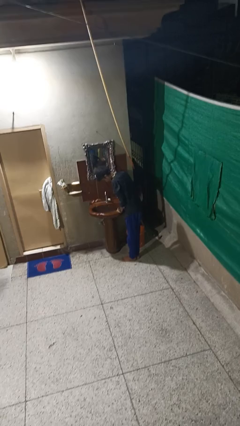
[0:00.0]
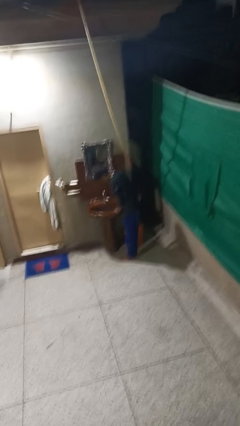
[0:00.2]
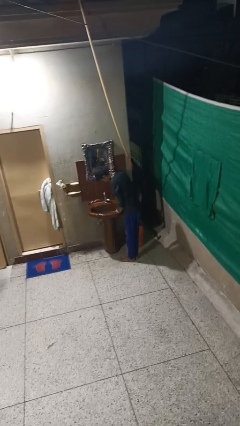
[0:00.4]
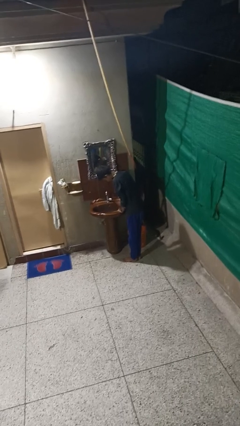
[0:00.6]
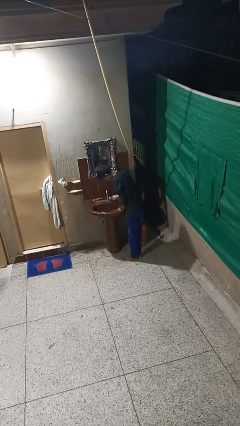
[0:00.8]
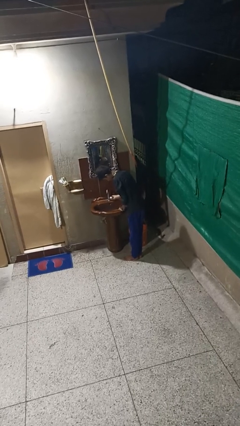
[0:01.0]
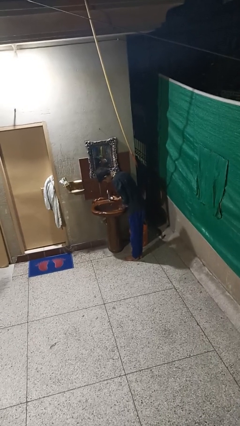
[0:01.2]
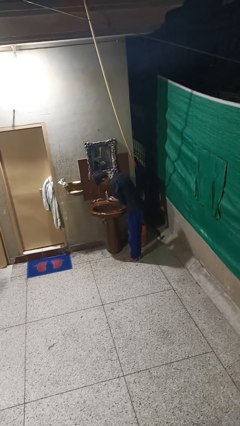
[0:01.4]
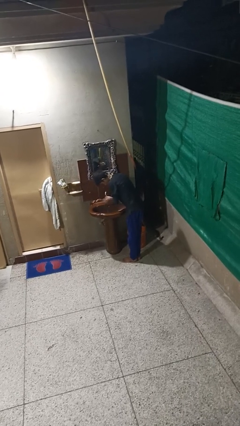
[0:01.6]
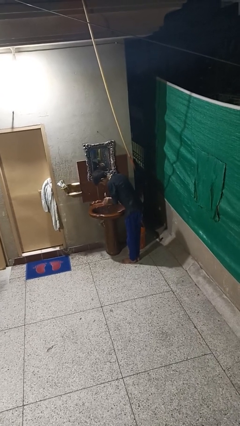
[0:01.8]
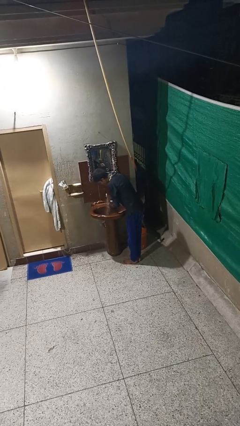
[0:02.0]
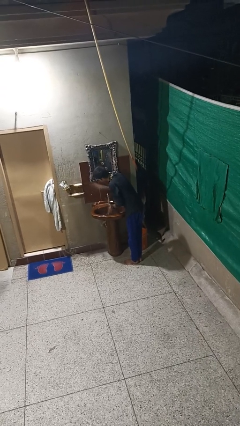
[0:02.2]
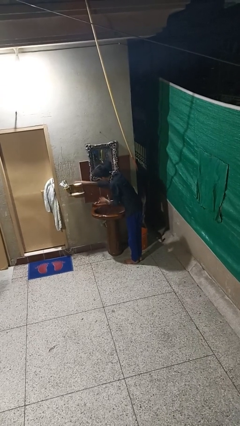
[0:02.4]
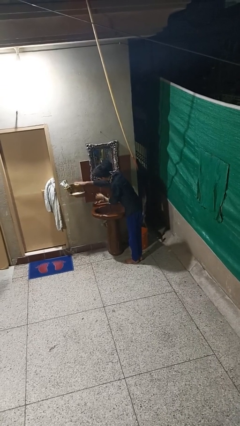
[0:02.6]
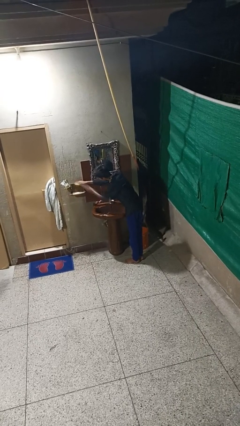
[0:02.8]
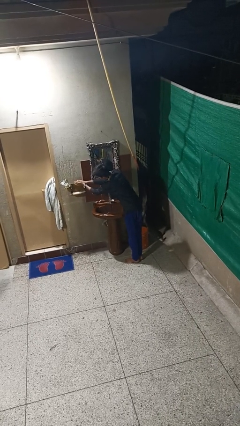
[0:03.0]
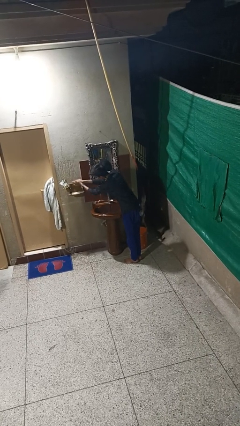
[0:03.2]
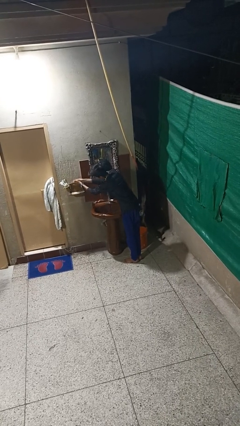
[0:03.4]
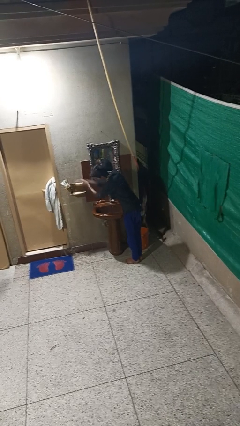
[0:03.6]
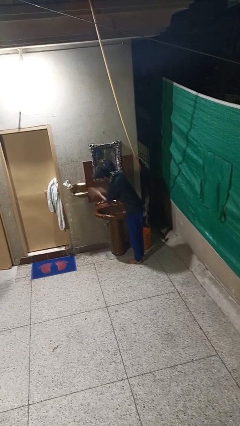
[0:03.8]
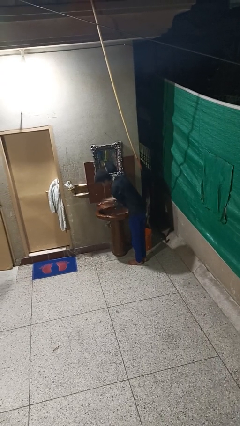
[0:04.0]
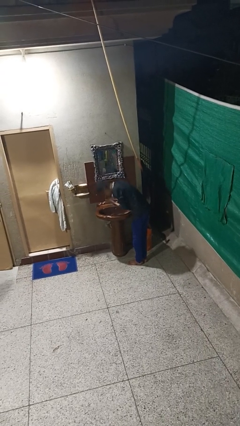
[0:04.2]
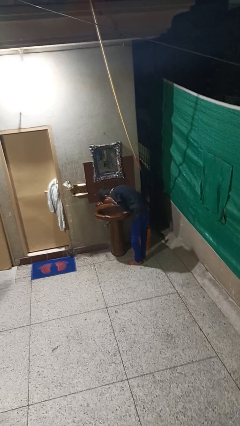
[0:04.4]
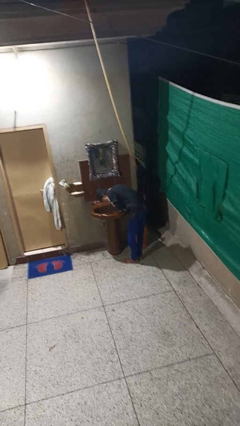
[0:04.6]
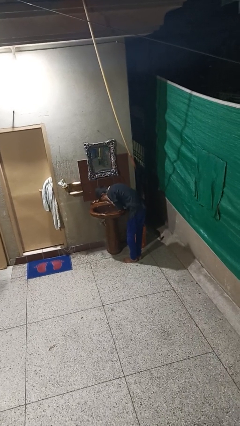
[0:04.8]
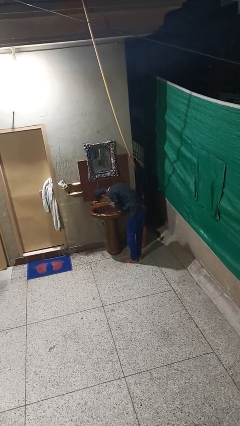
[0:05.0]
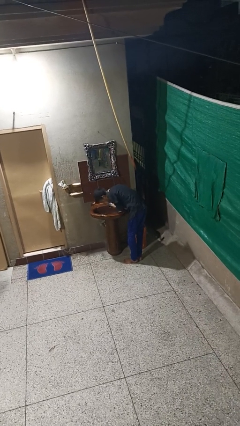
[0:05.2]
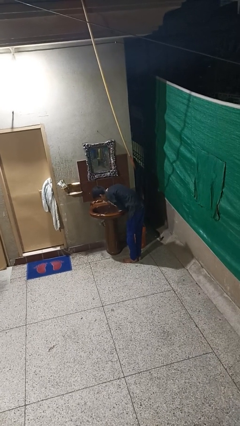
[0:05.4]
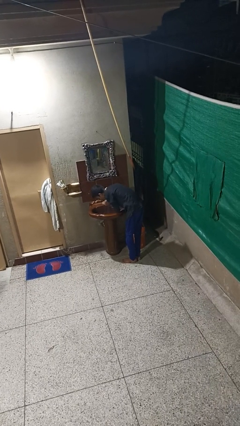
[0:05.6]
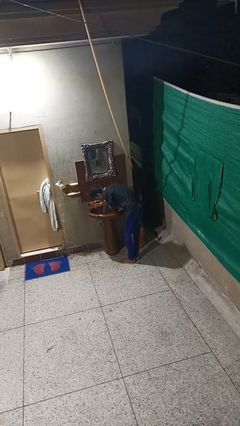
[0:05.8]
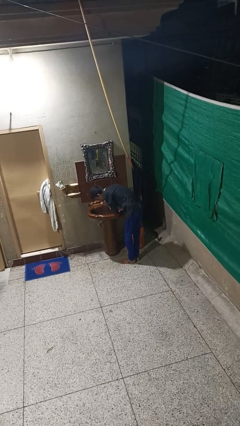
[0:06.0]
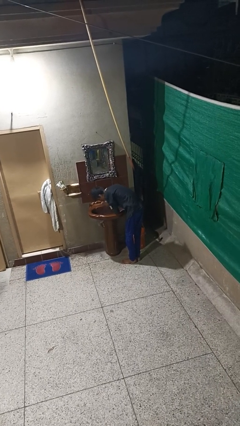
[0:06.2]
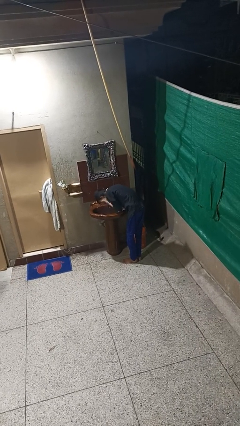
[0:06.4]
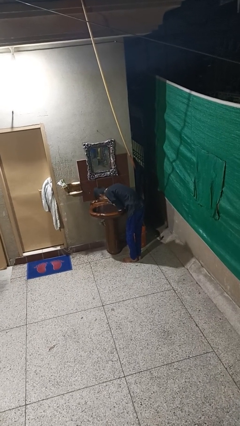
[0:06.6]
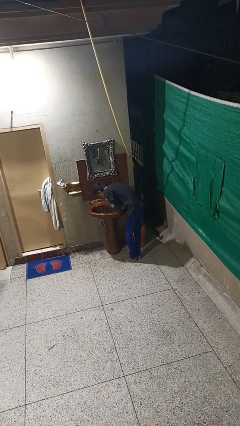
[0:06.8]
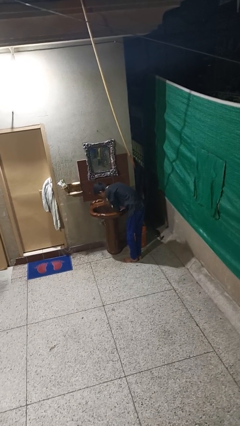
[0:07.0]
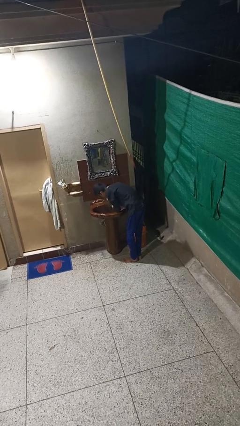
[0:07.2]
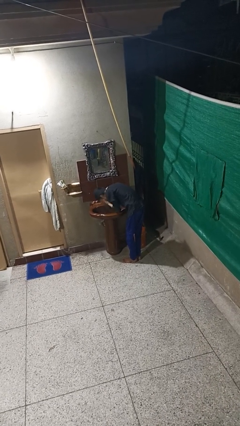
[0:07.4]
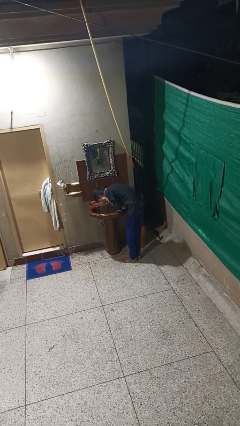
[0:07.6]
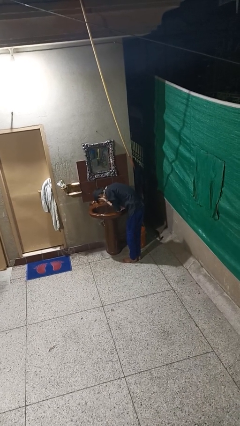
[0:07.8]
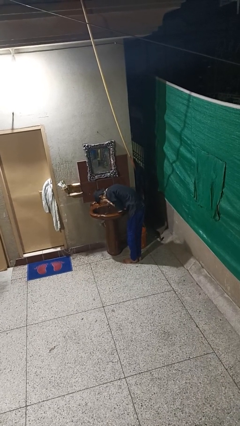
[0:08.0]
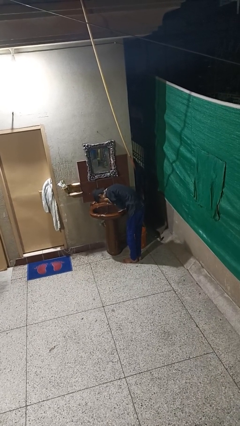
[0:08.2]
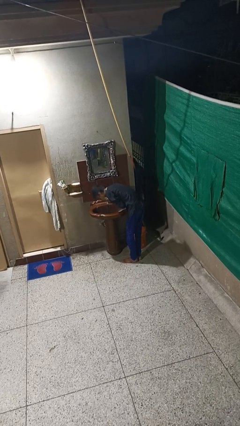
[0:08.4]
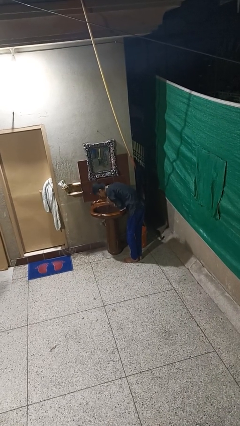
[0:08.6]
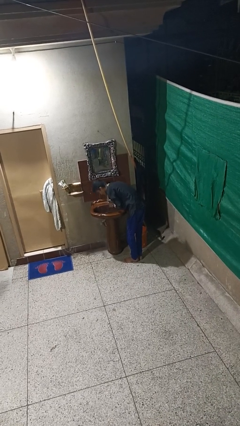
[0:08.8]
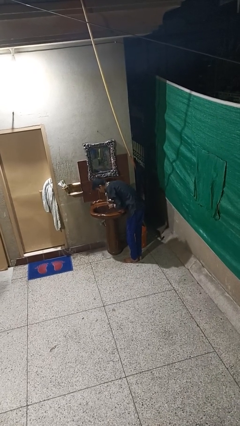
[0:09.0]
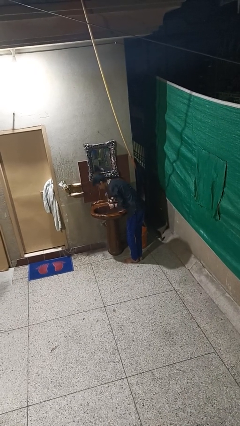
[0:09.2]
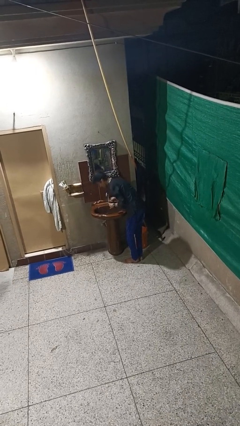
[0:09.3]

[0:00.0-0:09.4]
person washes face

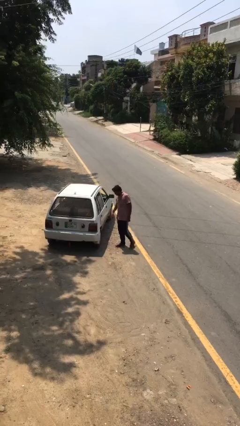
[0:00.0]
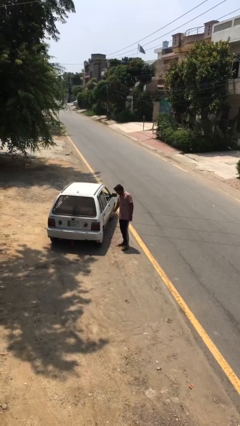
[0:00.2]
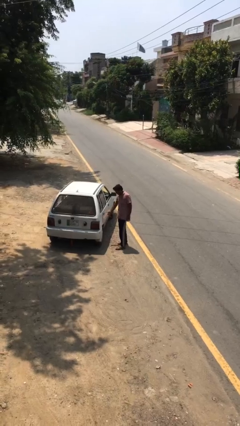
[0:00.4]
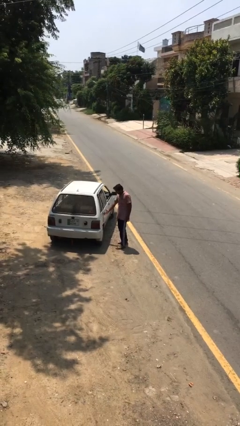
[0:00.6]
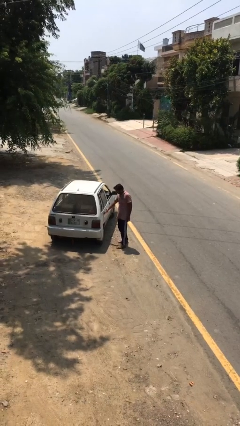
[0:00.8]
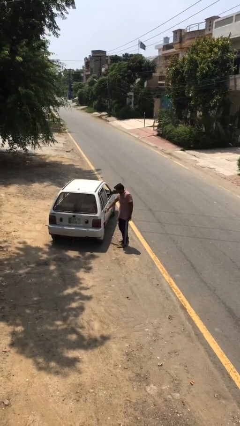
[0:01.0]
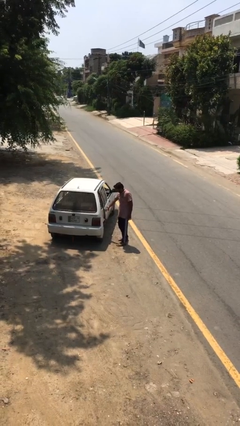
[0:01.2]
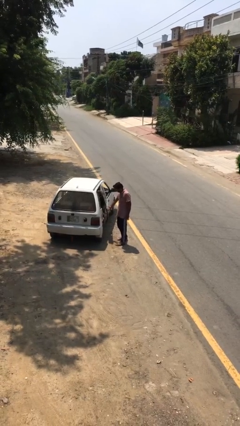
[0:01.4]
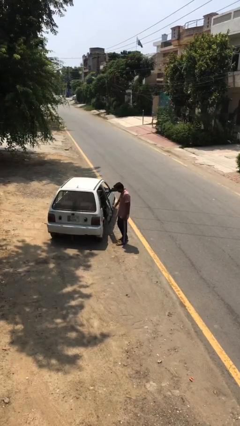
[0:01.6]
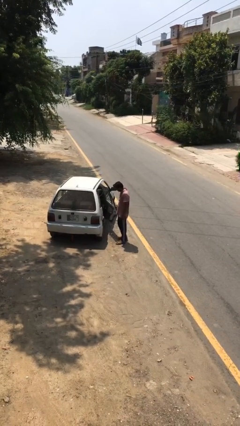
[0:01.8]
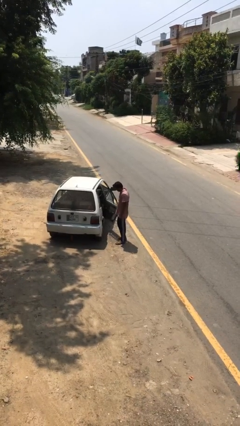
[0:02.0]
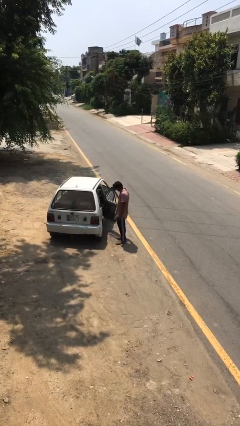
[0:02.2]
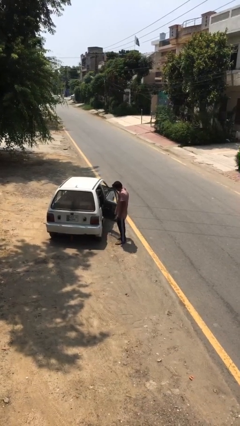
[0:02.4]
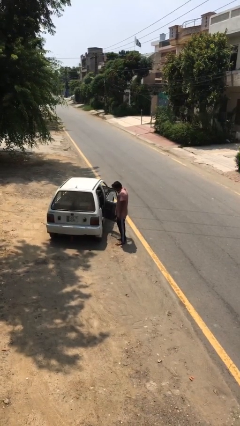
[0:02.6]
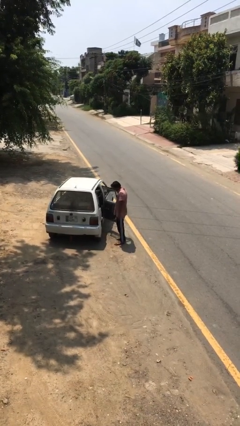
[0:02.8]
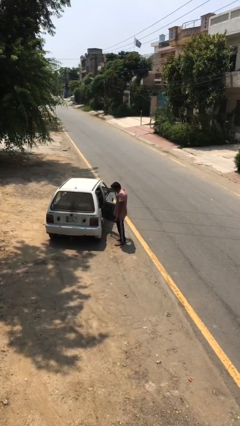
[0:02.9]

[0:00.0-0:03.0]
person opens car door

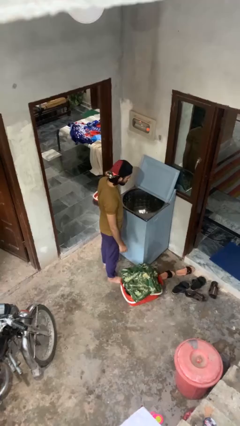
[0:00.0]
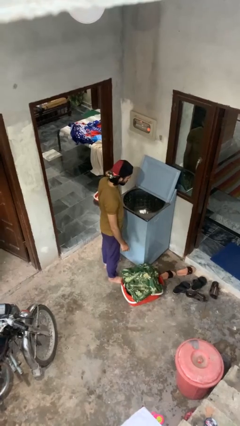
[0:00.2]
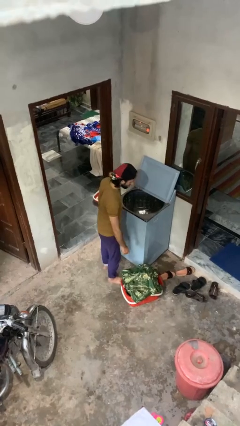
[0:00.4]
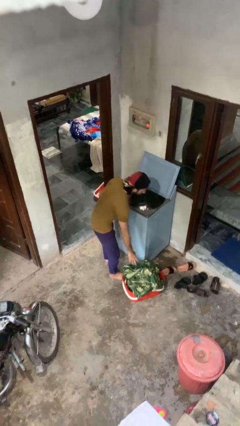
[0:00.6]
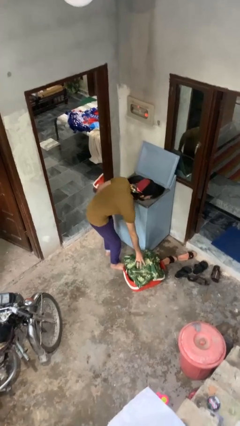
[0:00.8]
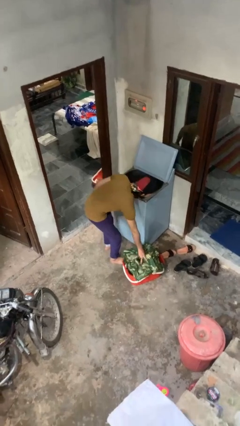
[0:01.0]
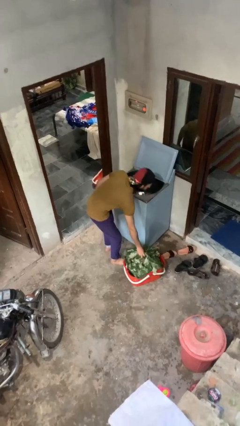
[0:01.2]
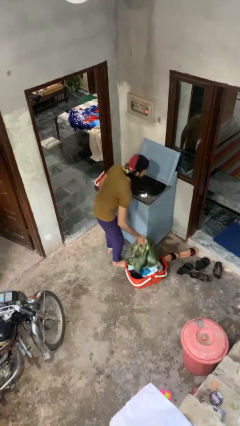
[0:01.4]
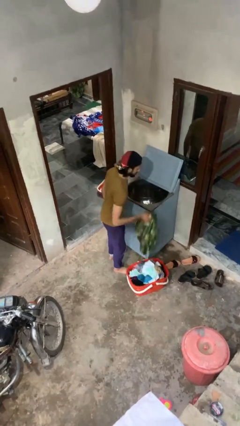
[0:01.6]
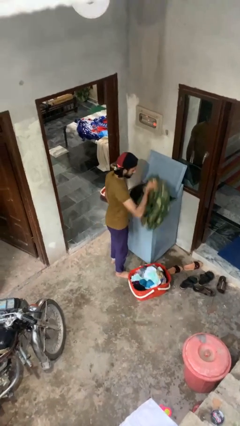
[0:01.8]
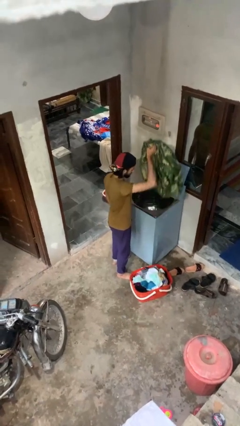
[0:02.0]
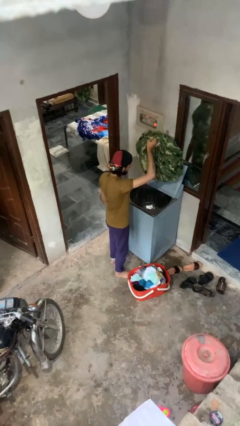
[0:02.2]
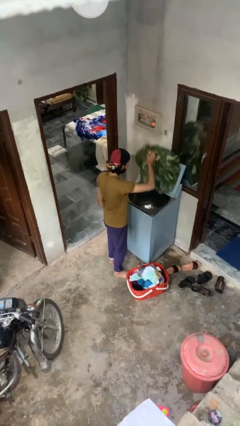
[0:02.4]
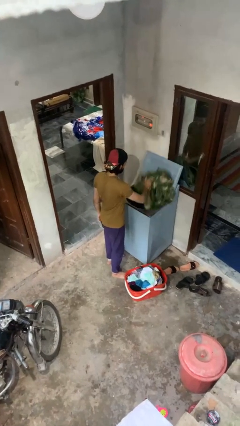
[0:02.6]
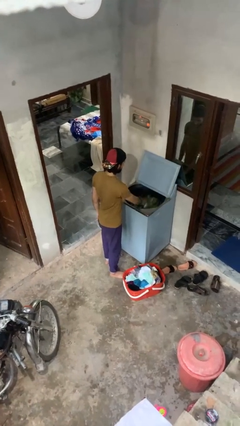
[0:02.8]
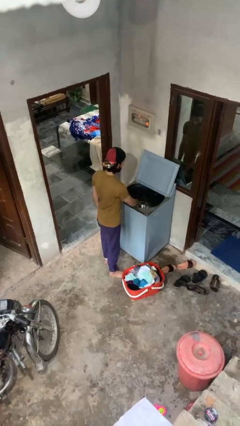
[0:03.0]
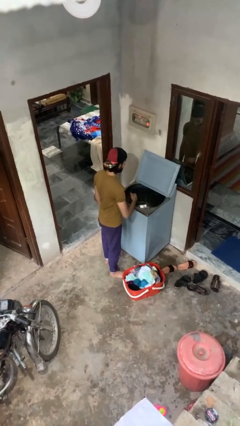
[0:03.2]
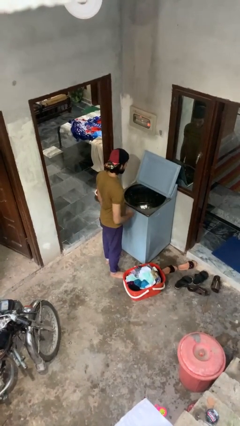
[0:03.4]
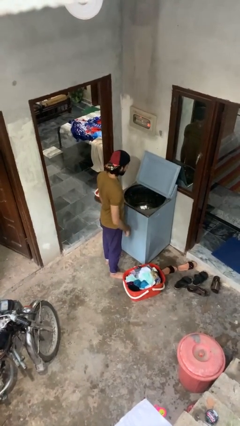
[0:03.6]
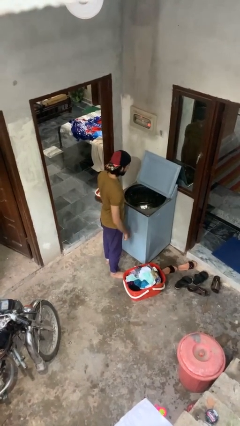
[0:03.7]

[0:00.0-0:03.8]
person loads clotheswasher

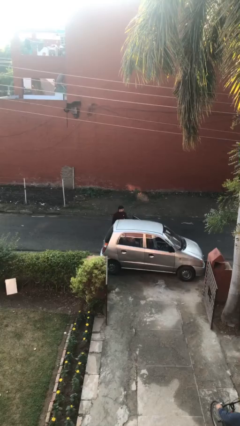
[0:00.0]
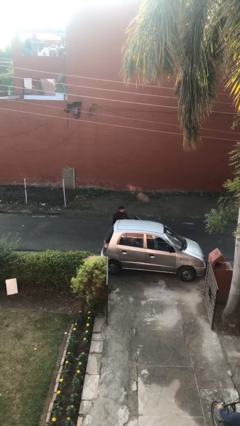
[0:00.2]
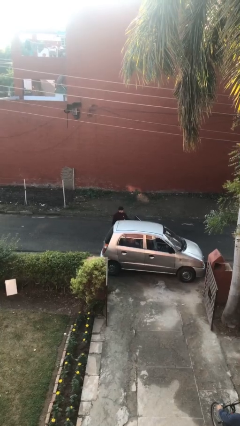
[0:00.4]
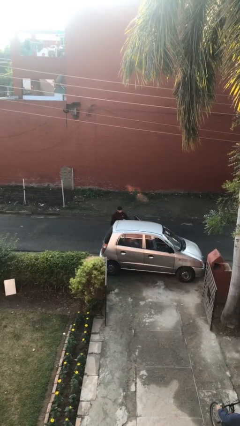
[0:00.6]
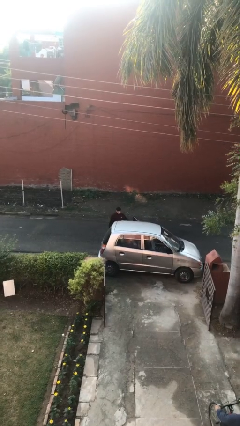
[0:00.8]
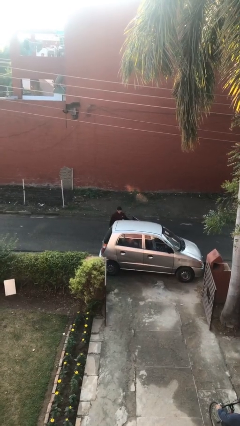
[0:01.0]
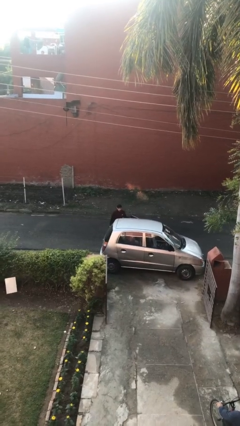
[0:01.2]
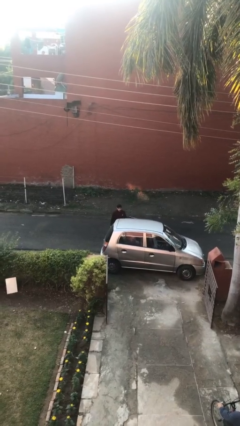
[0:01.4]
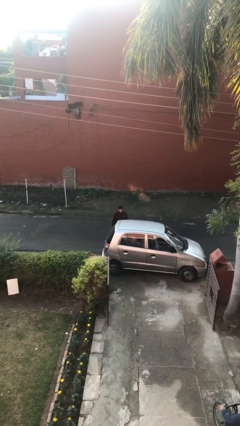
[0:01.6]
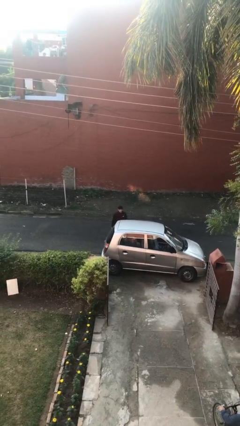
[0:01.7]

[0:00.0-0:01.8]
person closes car door

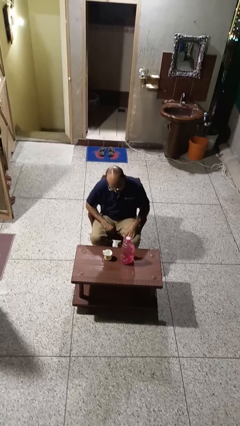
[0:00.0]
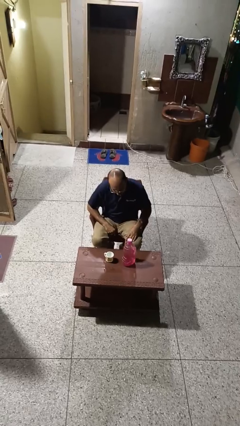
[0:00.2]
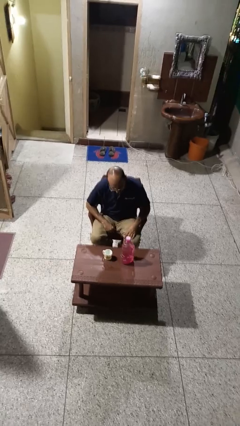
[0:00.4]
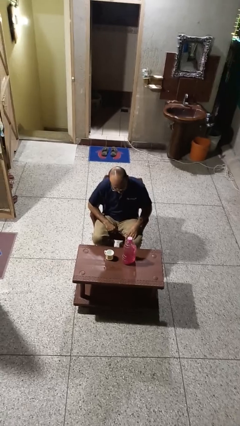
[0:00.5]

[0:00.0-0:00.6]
person screws lid to bottle
